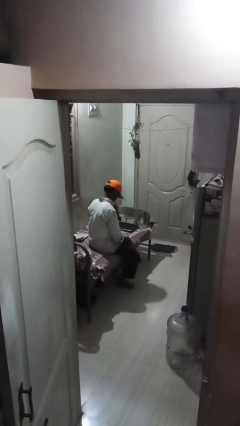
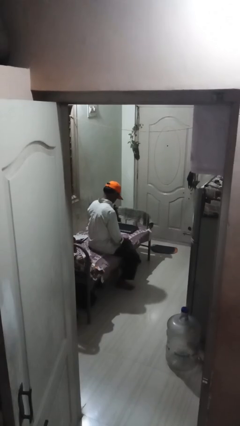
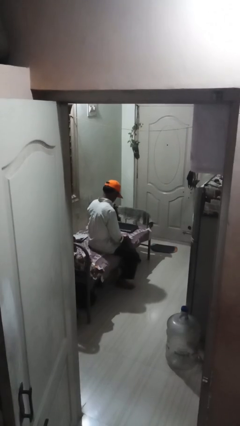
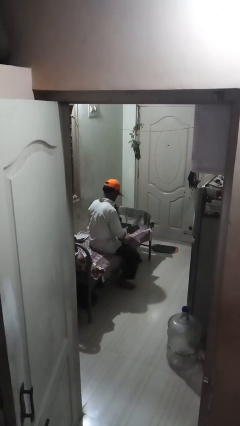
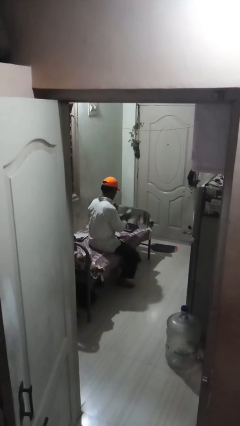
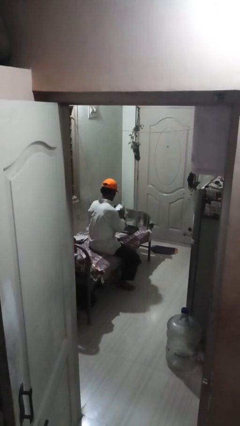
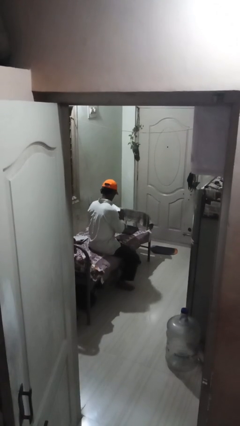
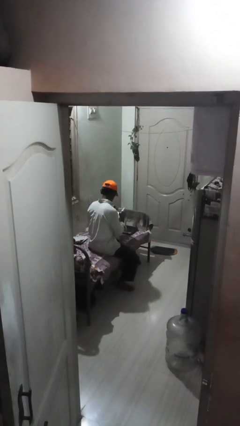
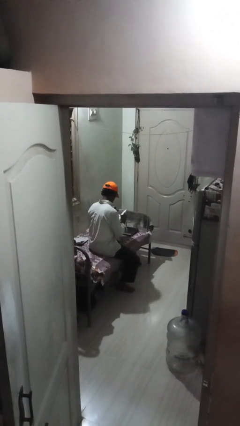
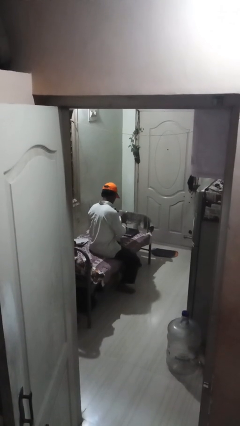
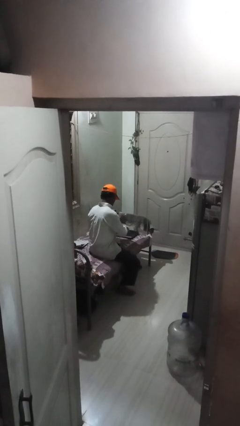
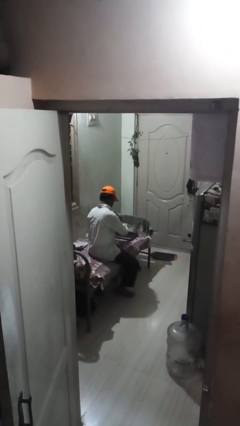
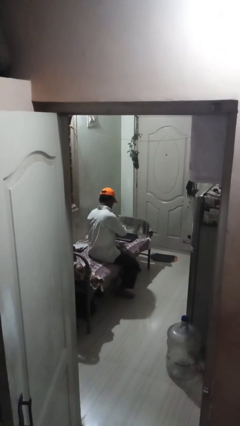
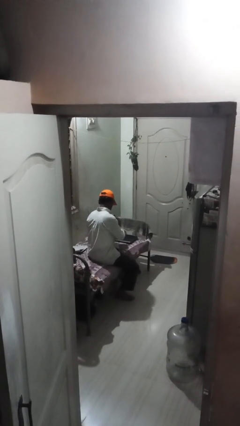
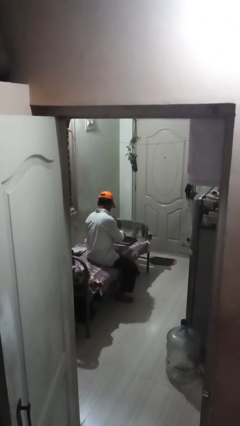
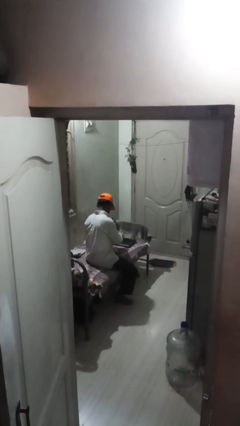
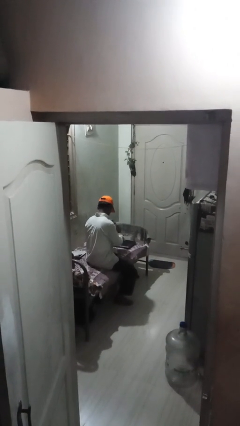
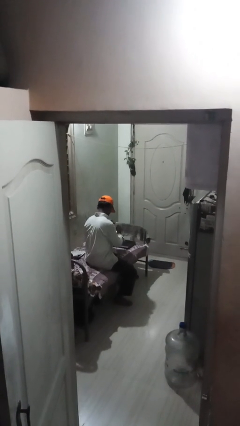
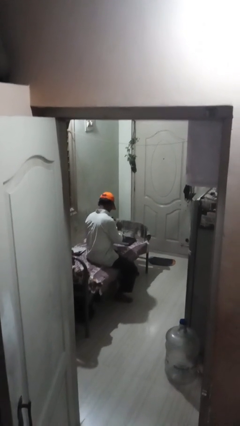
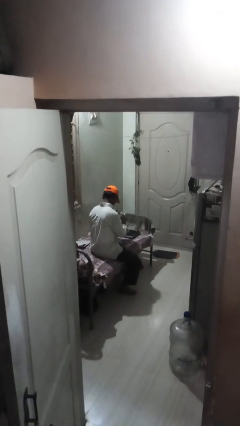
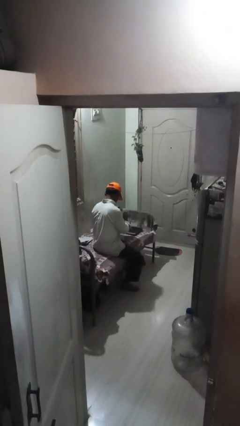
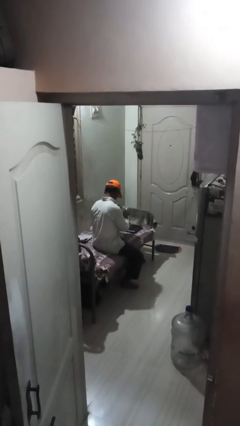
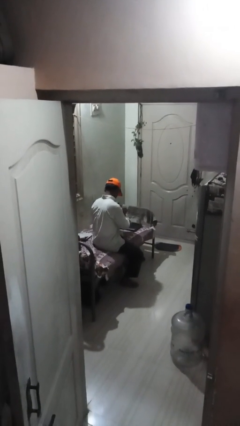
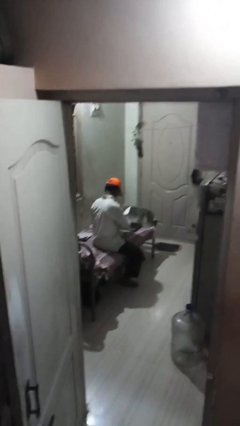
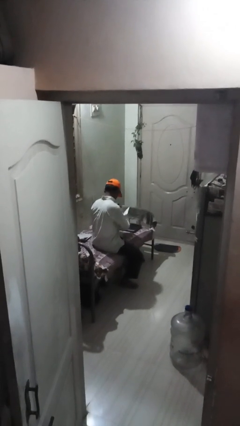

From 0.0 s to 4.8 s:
person reads magazine

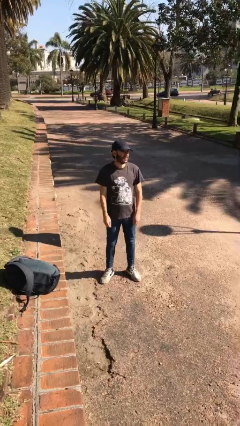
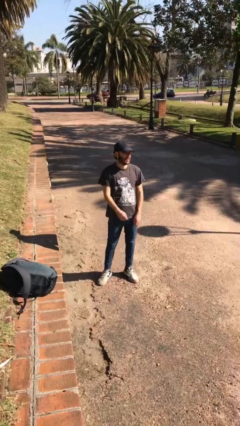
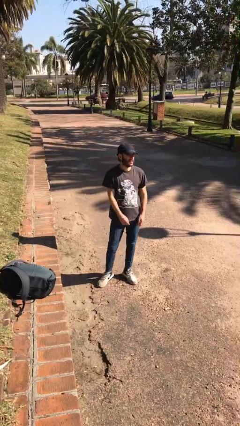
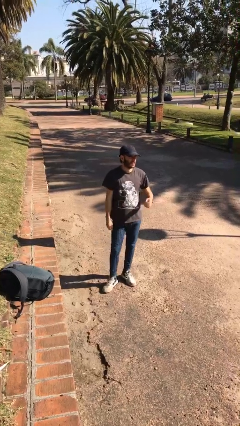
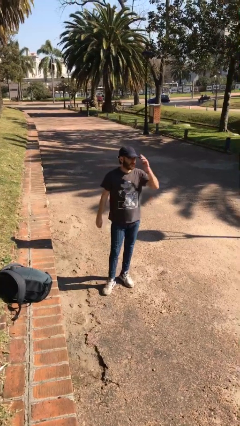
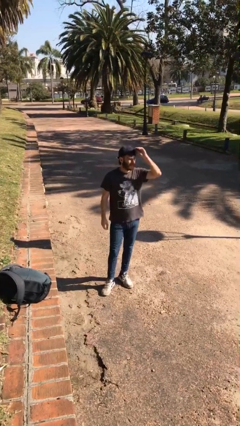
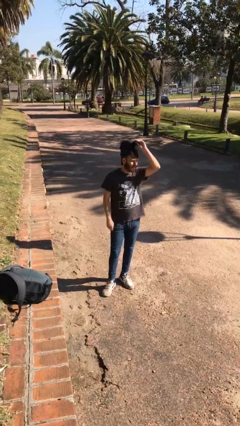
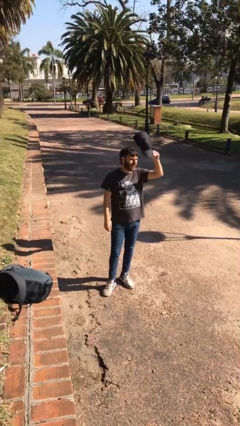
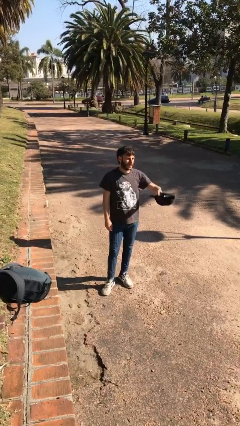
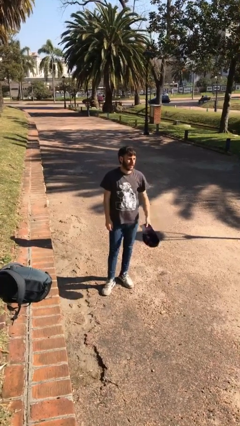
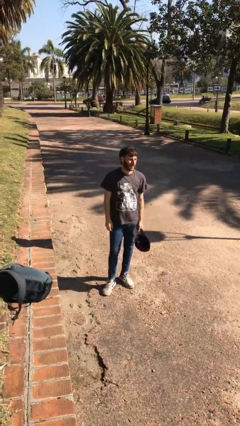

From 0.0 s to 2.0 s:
person takes off hat

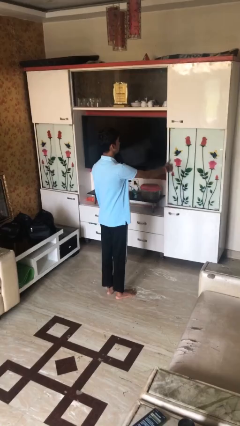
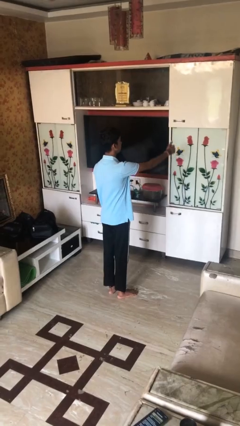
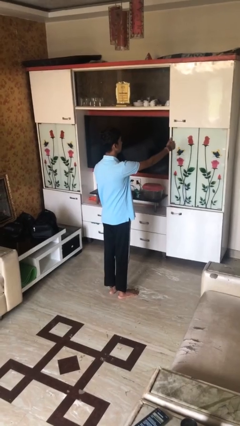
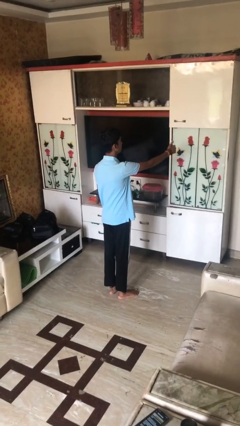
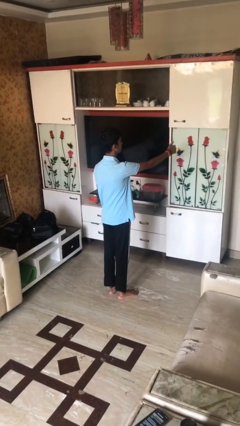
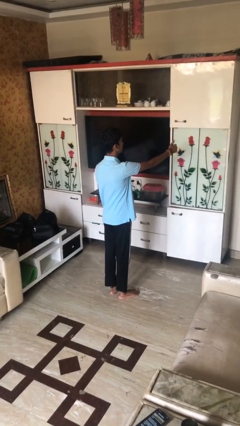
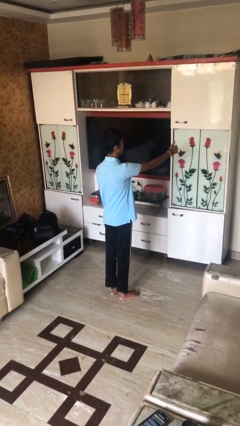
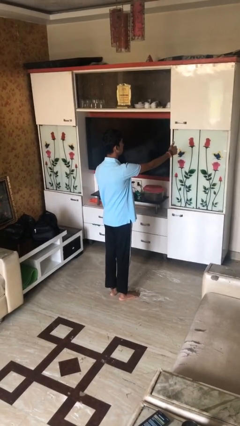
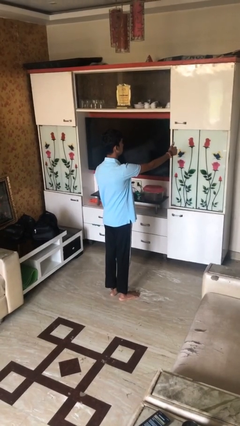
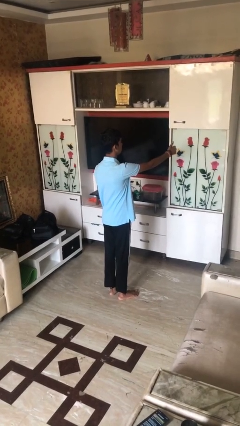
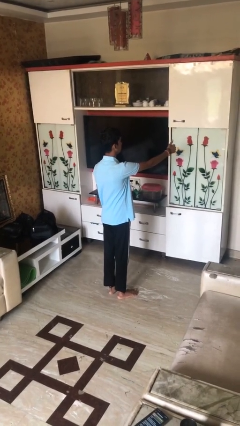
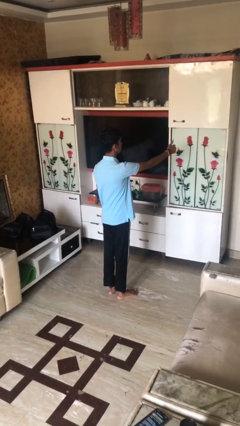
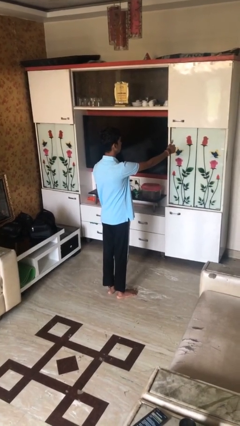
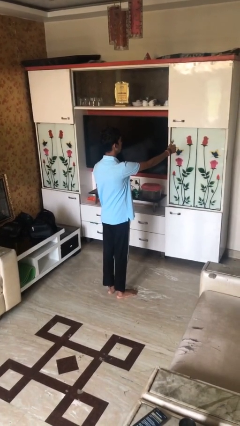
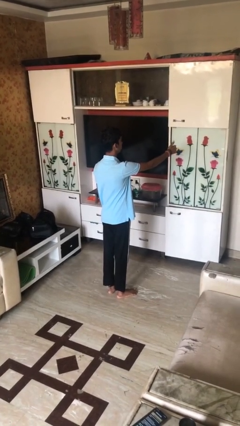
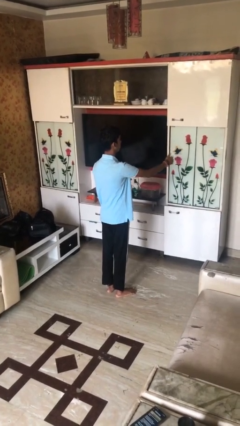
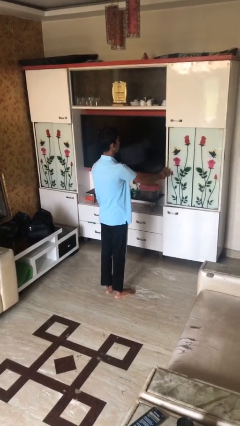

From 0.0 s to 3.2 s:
person gestures thumbs up

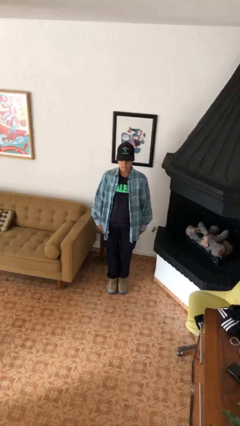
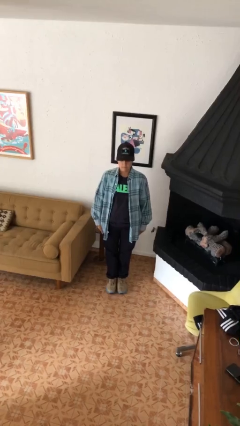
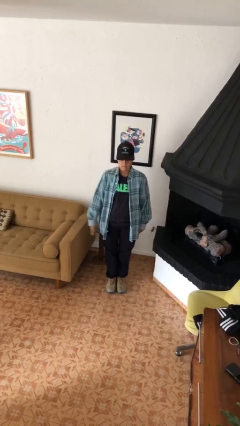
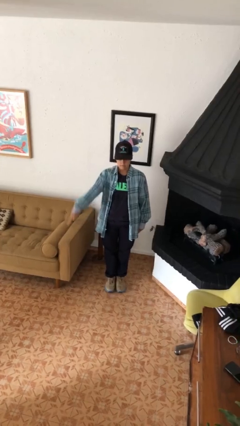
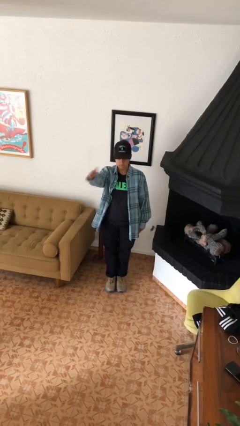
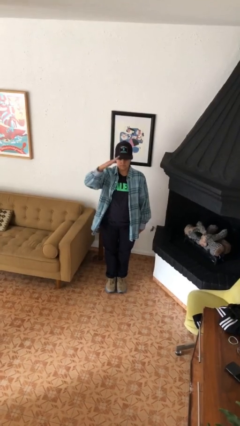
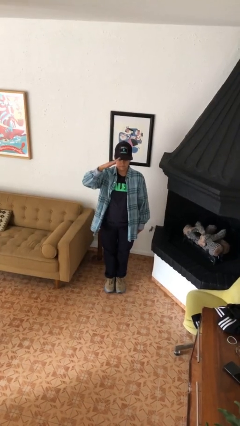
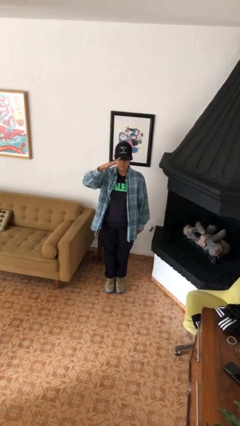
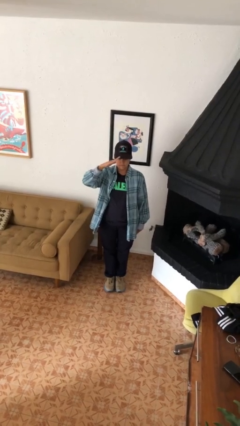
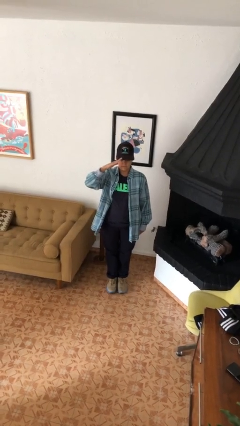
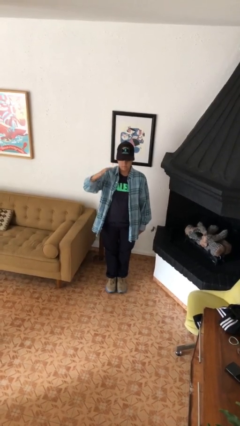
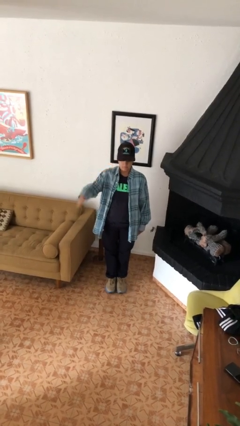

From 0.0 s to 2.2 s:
person salutes

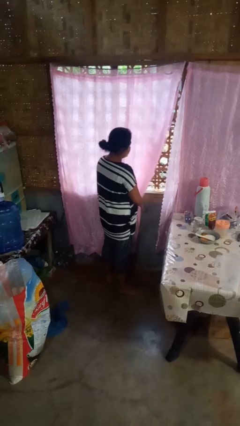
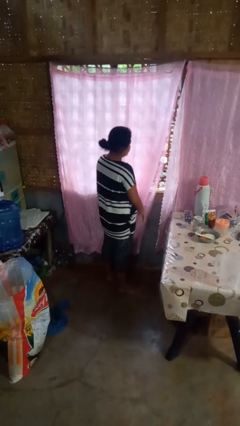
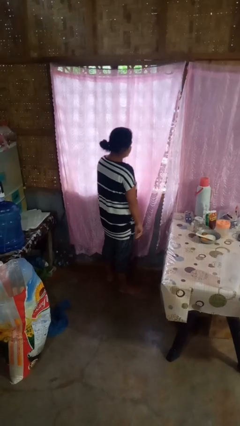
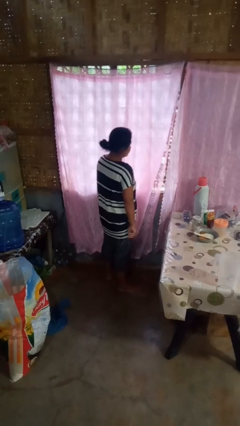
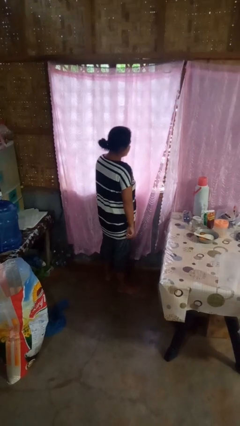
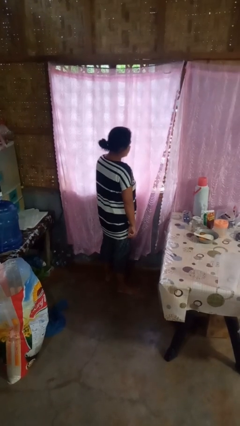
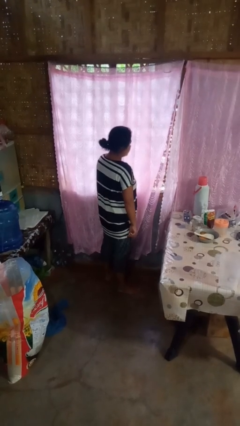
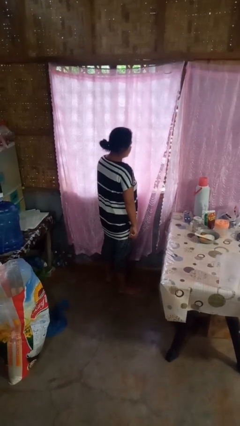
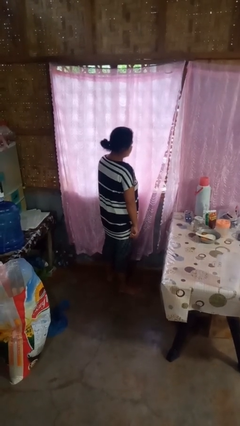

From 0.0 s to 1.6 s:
person closes curtains

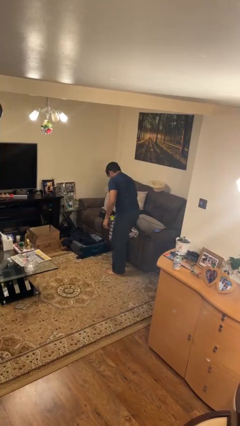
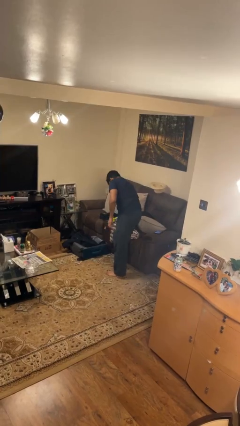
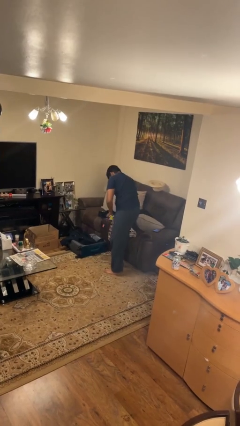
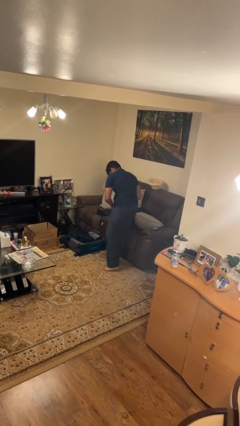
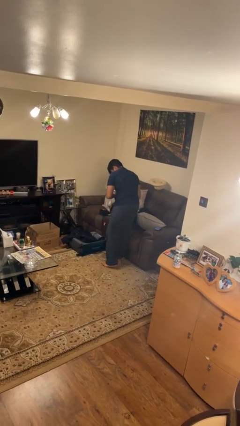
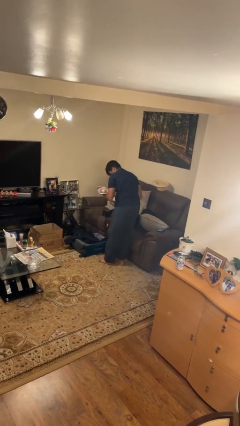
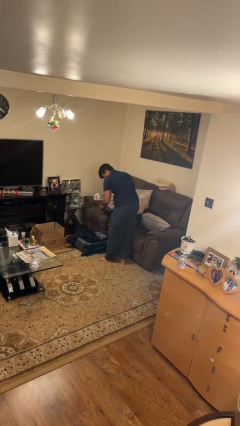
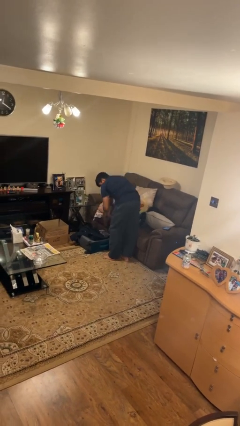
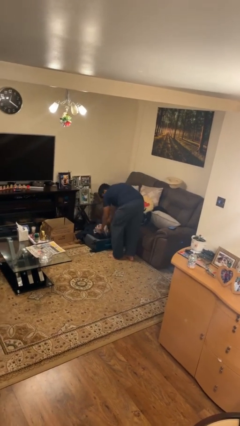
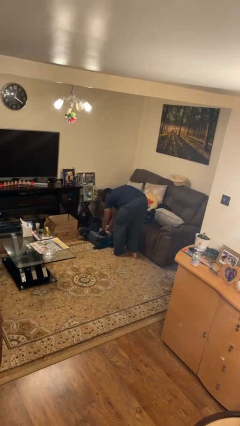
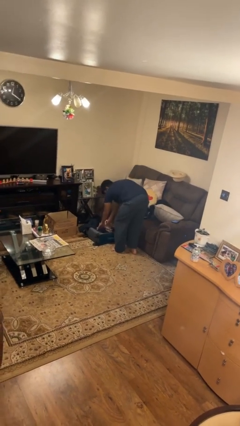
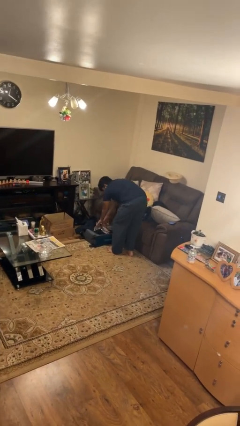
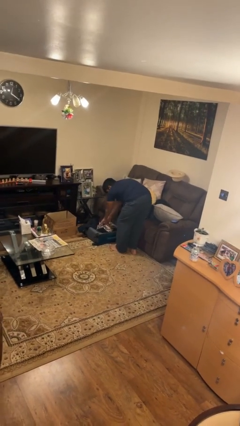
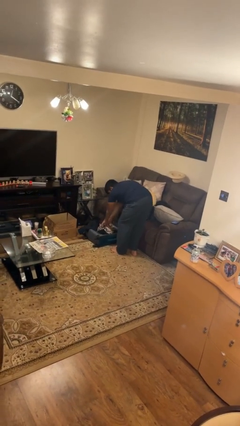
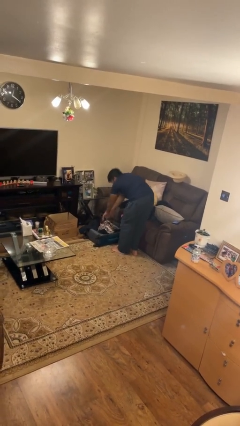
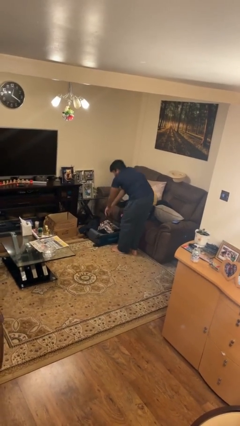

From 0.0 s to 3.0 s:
person loads clothes into suitcase

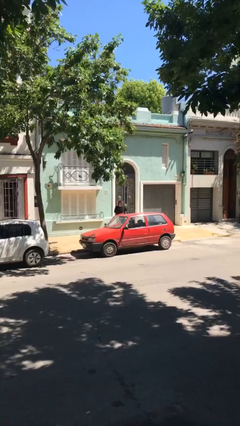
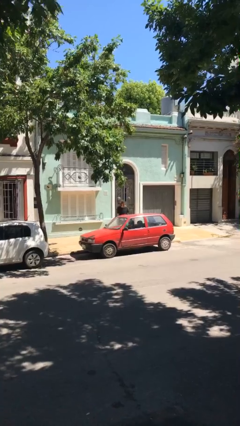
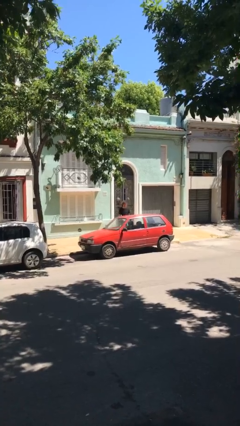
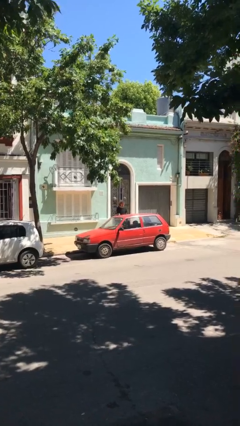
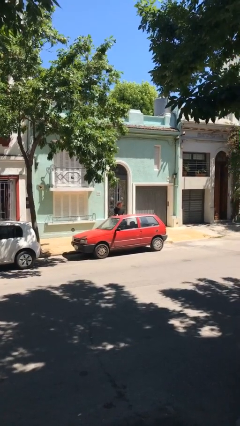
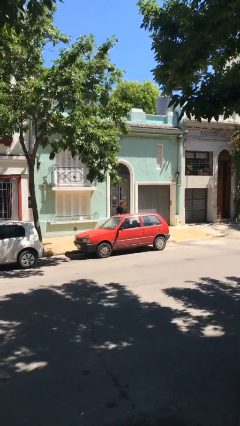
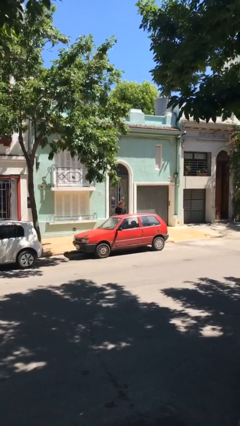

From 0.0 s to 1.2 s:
person closes car door
